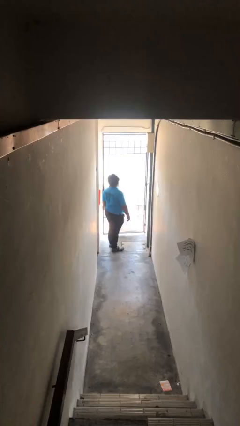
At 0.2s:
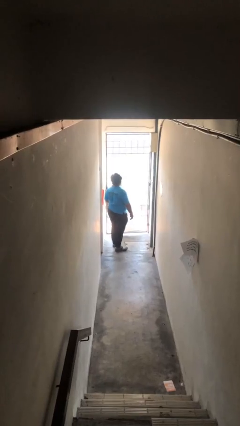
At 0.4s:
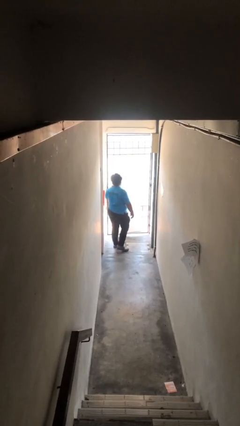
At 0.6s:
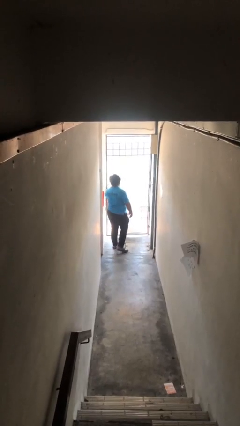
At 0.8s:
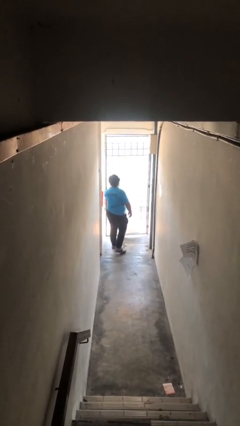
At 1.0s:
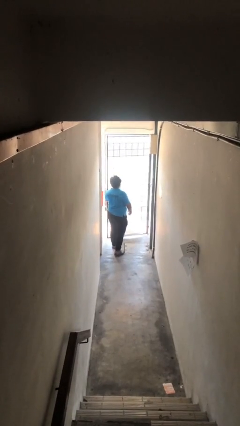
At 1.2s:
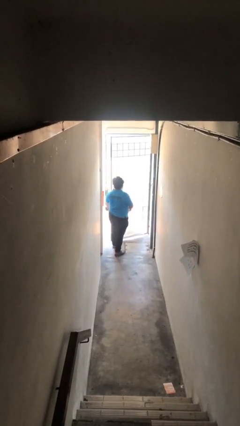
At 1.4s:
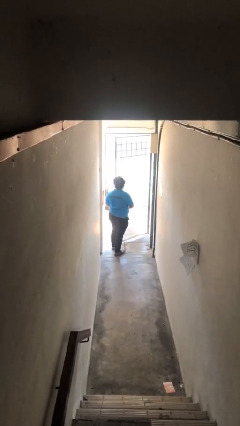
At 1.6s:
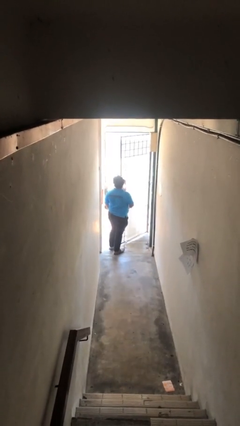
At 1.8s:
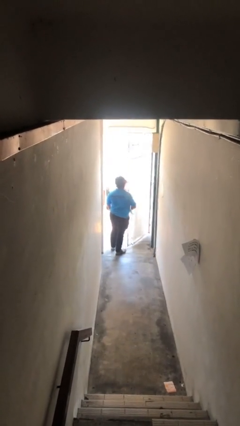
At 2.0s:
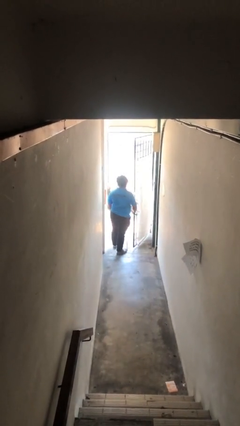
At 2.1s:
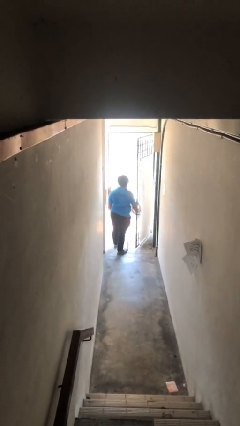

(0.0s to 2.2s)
person opens facility door

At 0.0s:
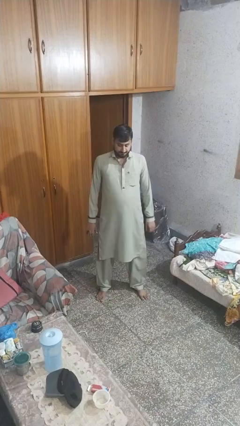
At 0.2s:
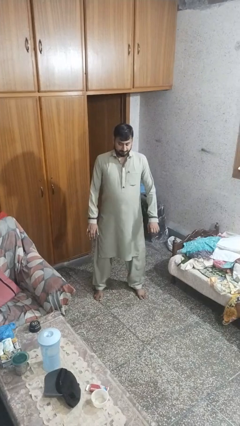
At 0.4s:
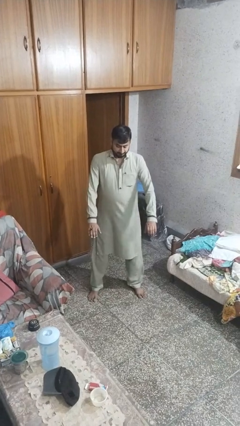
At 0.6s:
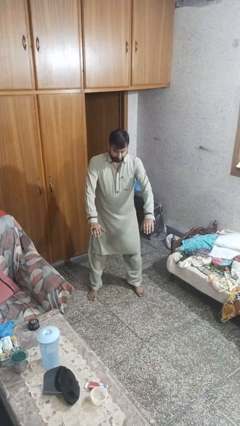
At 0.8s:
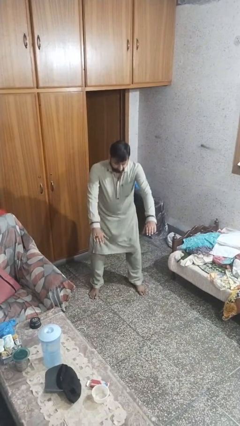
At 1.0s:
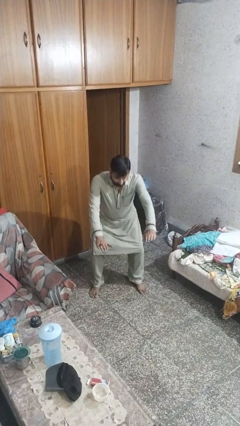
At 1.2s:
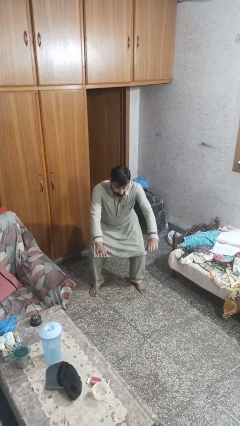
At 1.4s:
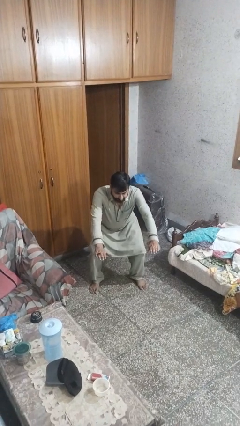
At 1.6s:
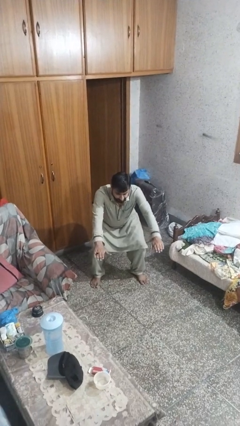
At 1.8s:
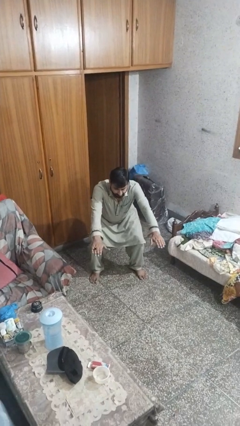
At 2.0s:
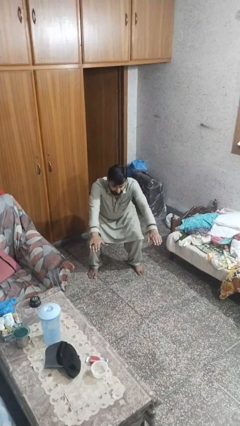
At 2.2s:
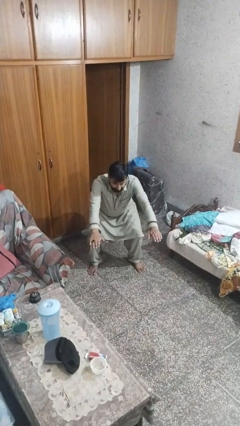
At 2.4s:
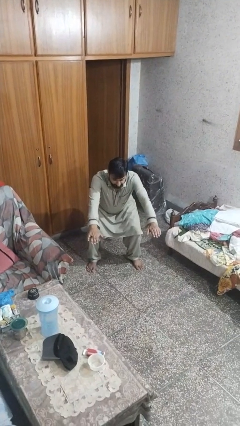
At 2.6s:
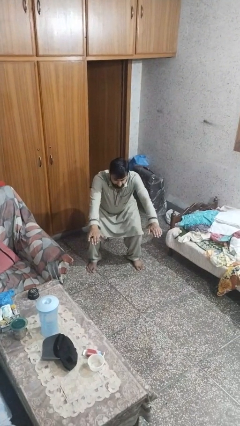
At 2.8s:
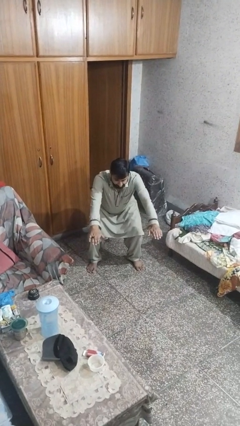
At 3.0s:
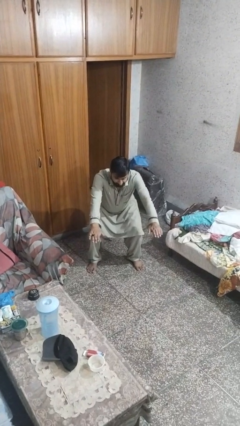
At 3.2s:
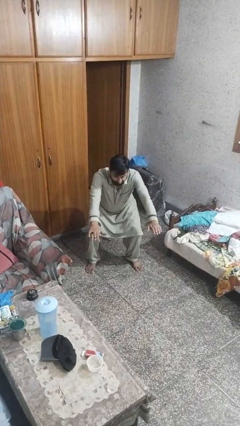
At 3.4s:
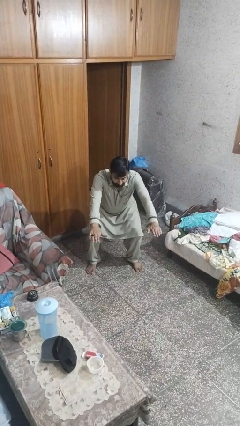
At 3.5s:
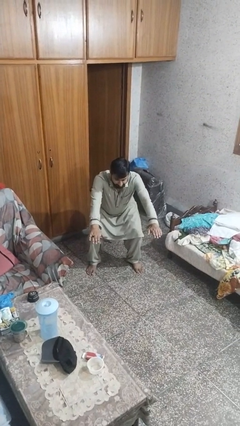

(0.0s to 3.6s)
person squats

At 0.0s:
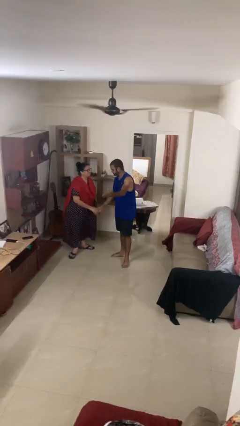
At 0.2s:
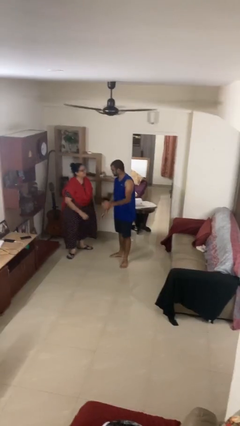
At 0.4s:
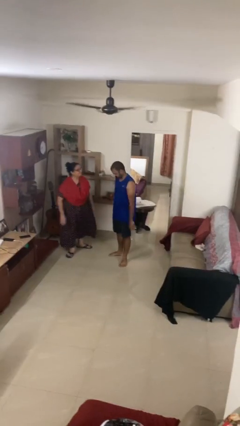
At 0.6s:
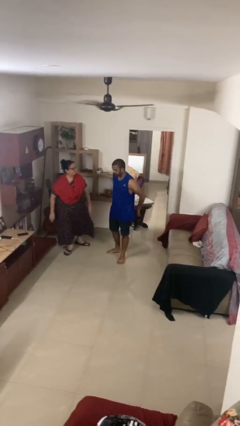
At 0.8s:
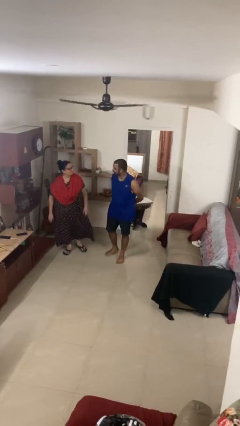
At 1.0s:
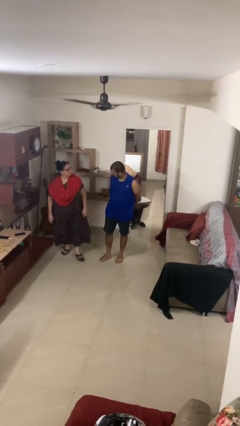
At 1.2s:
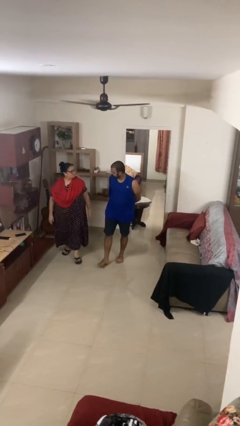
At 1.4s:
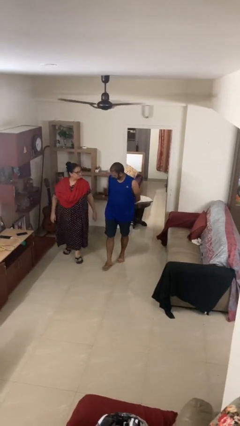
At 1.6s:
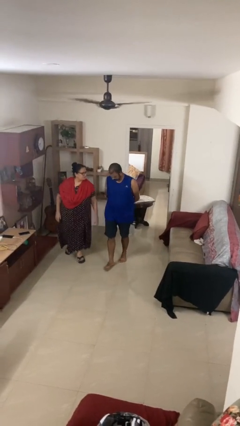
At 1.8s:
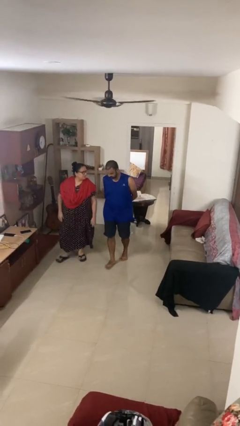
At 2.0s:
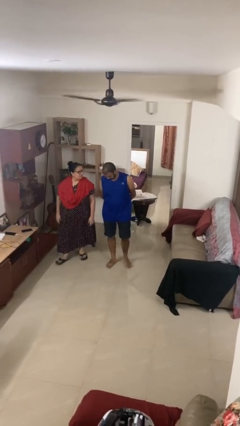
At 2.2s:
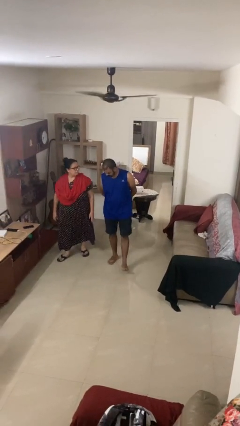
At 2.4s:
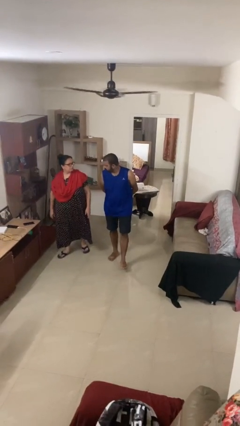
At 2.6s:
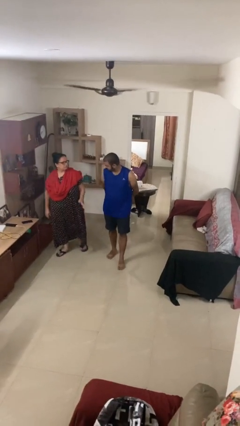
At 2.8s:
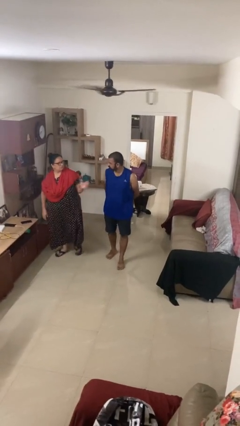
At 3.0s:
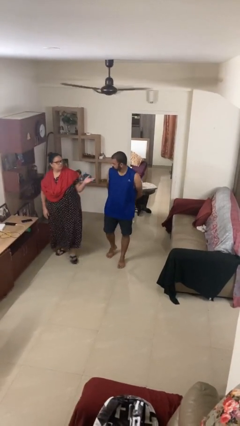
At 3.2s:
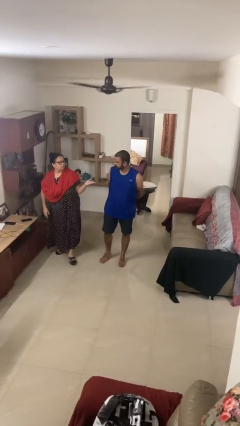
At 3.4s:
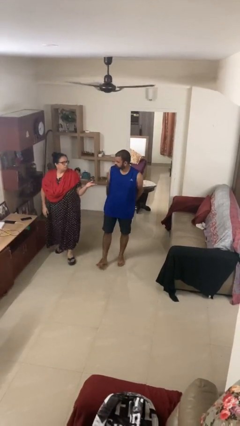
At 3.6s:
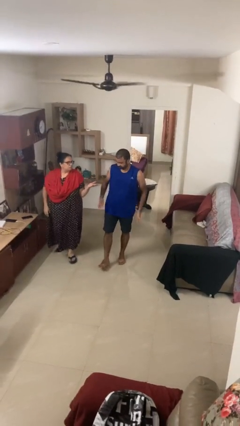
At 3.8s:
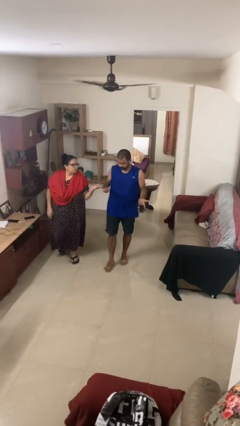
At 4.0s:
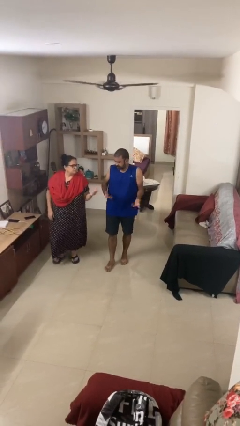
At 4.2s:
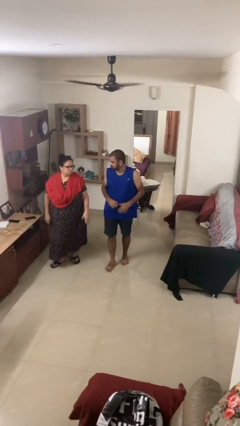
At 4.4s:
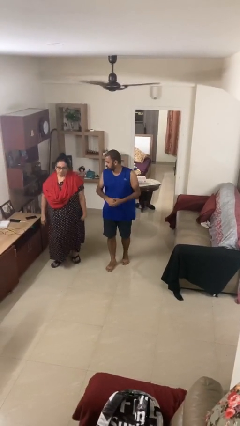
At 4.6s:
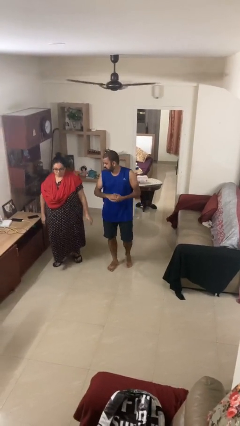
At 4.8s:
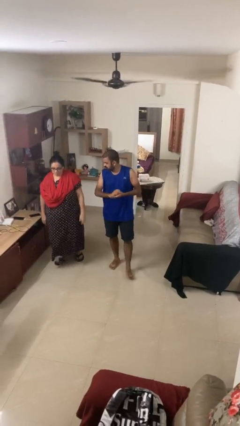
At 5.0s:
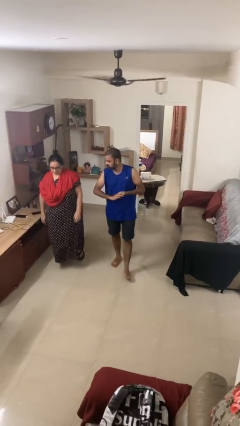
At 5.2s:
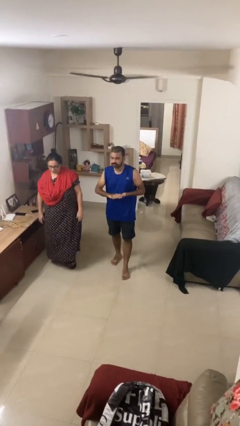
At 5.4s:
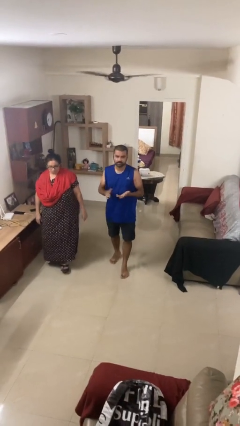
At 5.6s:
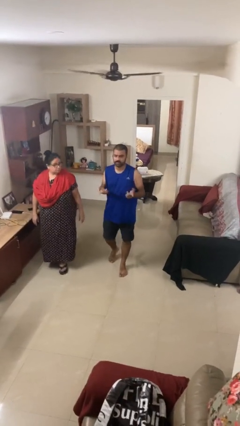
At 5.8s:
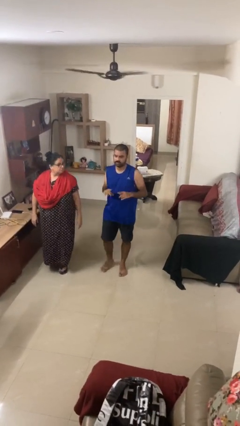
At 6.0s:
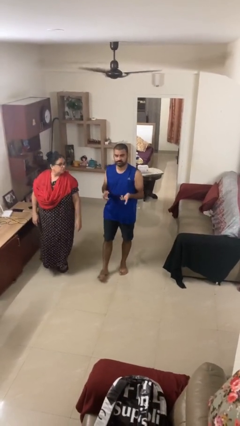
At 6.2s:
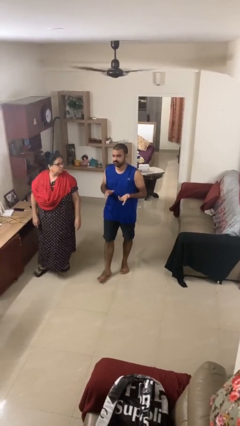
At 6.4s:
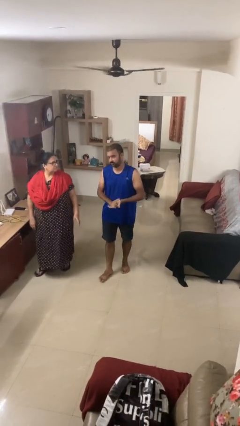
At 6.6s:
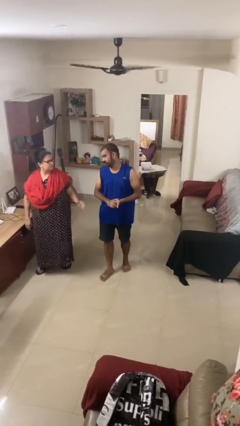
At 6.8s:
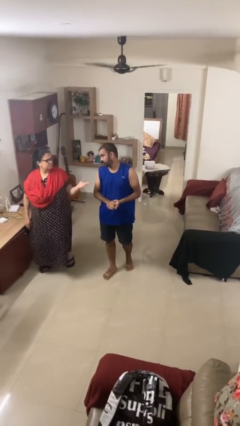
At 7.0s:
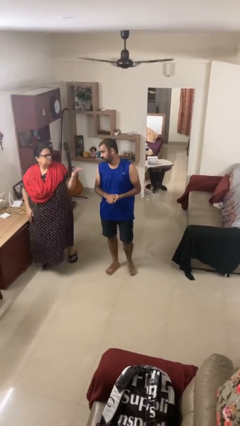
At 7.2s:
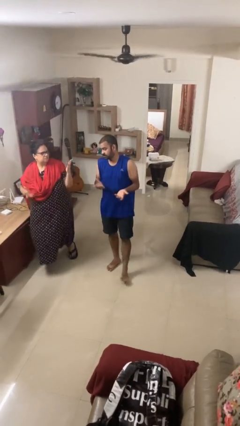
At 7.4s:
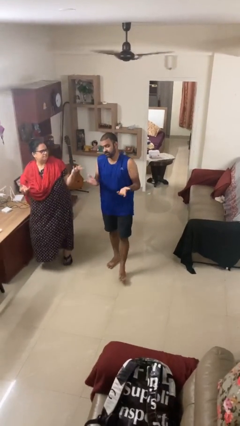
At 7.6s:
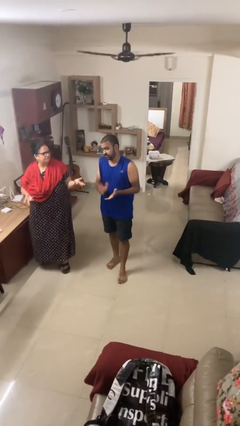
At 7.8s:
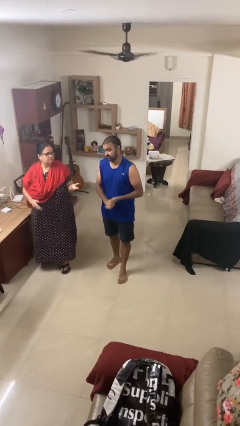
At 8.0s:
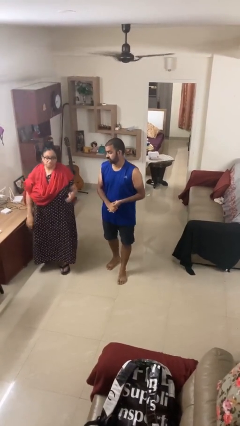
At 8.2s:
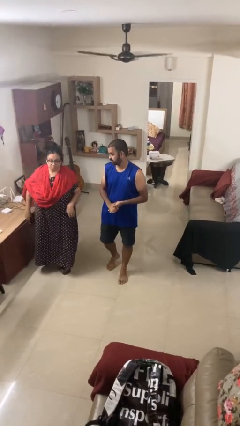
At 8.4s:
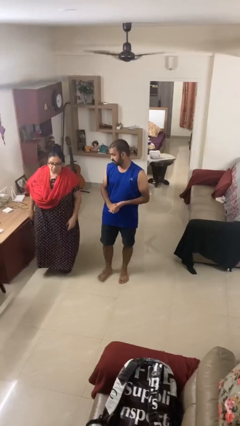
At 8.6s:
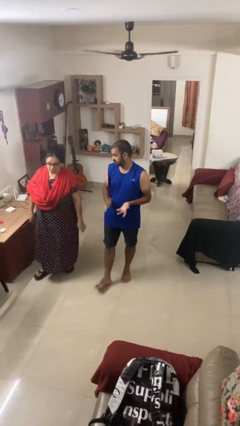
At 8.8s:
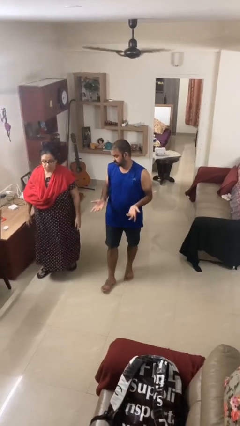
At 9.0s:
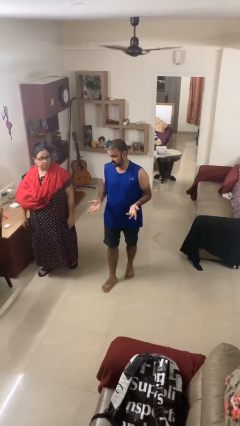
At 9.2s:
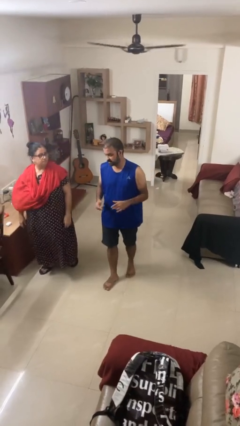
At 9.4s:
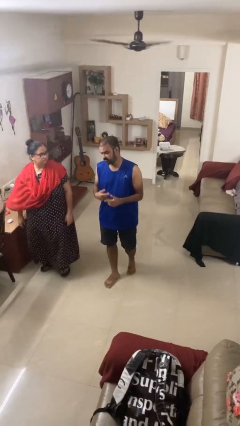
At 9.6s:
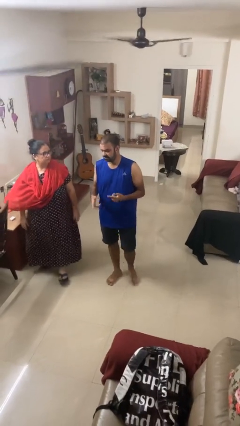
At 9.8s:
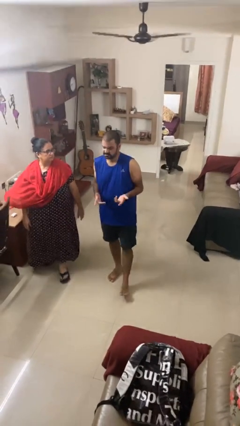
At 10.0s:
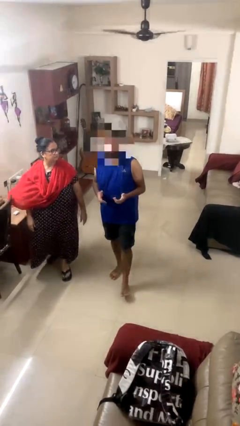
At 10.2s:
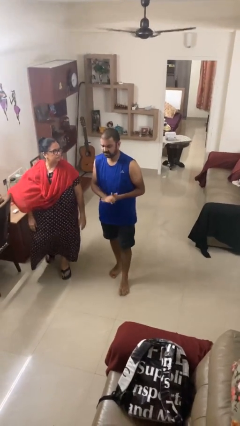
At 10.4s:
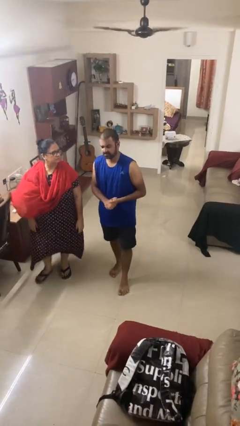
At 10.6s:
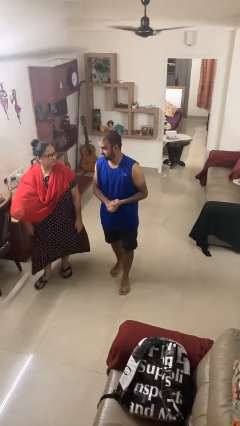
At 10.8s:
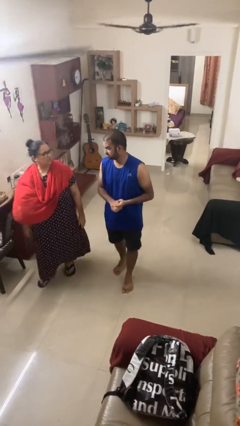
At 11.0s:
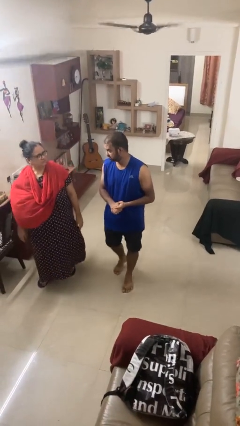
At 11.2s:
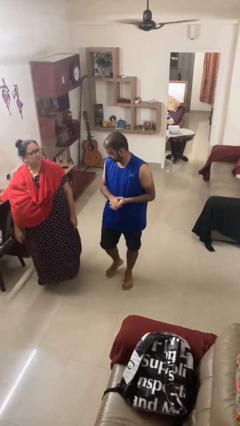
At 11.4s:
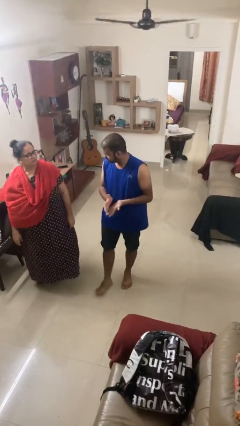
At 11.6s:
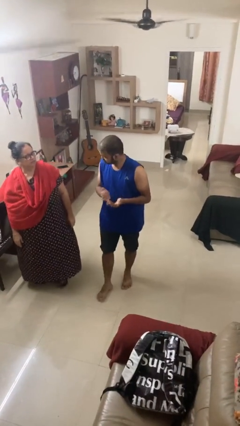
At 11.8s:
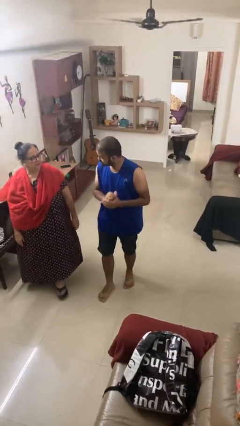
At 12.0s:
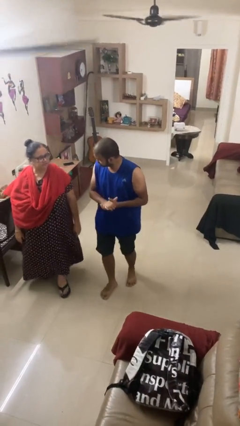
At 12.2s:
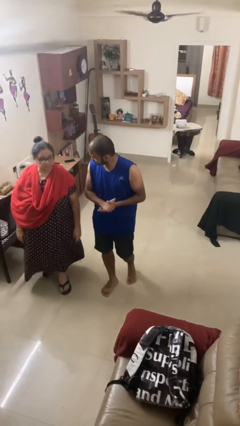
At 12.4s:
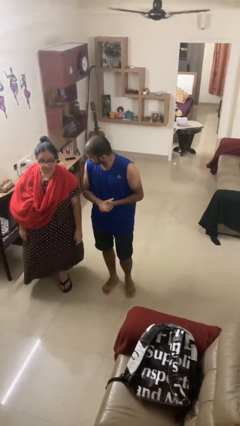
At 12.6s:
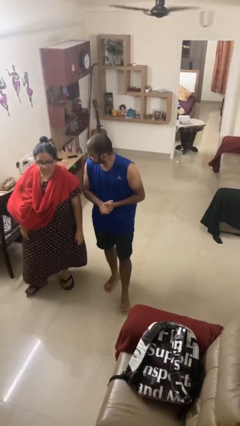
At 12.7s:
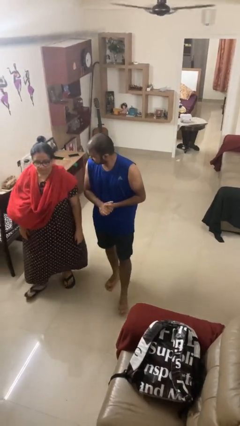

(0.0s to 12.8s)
person talks to person
